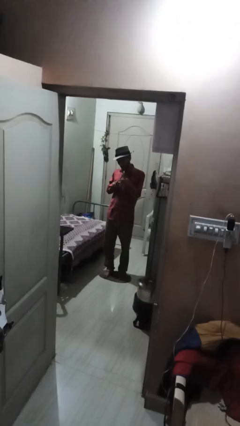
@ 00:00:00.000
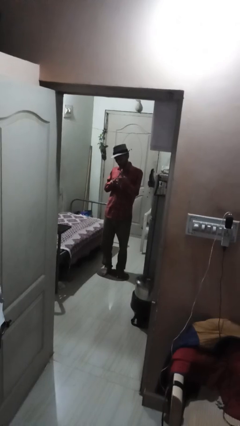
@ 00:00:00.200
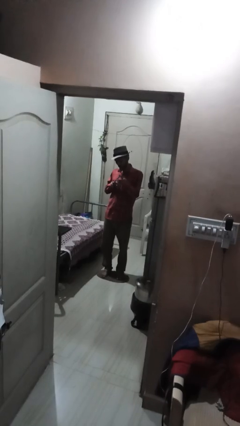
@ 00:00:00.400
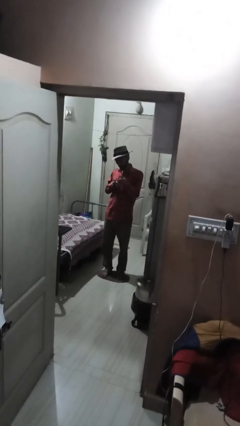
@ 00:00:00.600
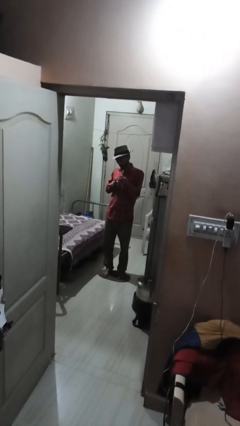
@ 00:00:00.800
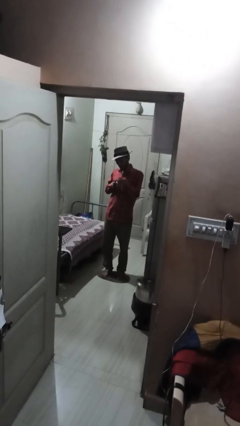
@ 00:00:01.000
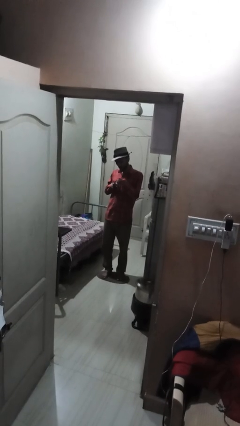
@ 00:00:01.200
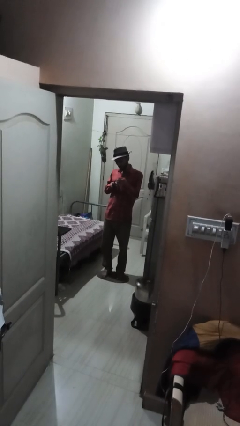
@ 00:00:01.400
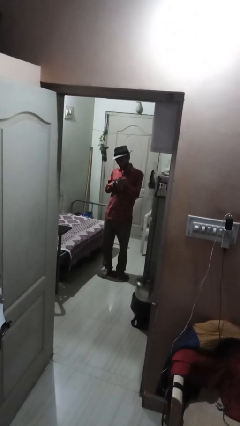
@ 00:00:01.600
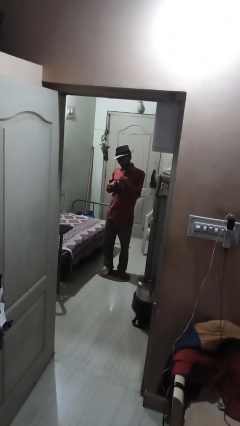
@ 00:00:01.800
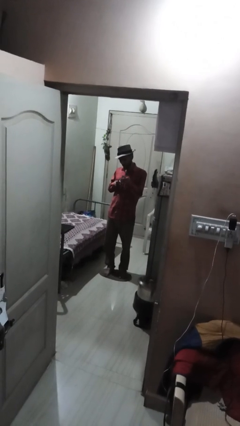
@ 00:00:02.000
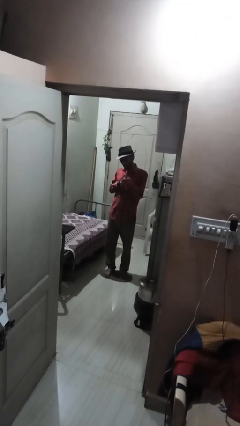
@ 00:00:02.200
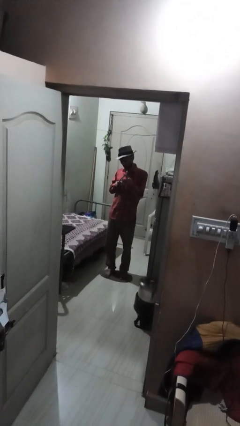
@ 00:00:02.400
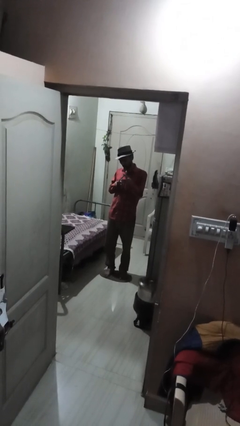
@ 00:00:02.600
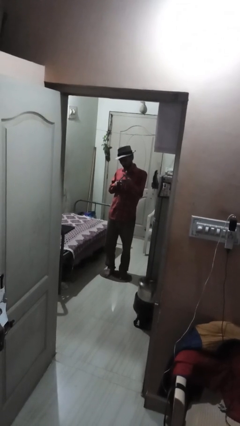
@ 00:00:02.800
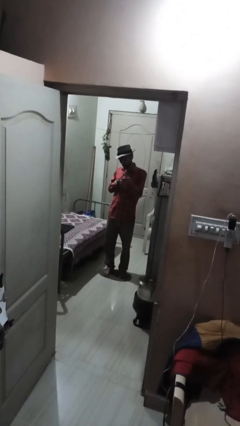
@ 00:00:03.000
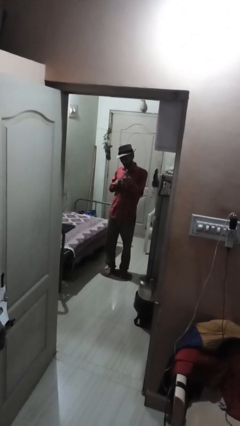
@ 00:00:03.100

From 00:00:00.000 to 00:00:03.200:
person clips fingernails

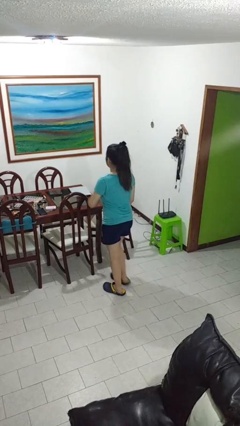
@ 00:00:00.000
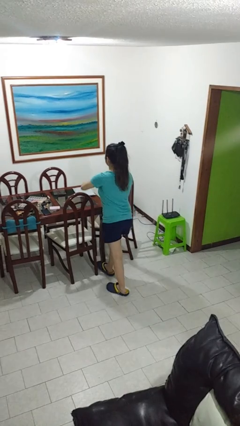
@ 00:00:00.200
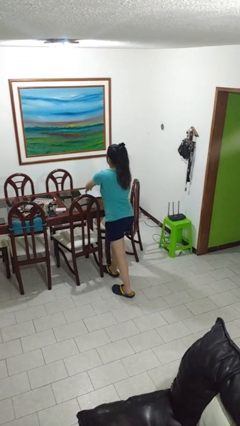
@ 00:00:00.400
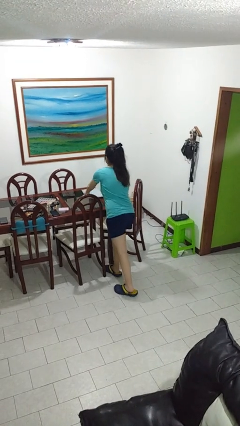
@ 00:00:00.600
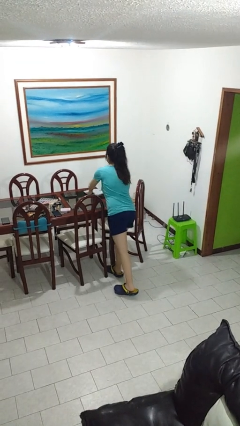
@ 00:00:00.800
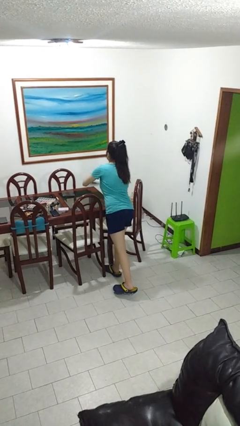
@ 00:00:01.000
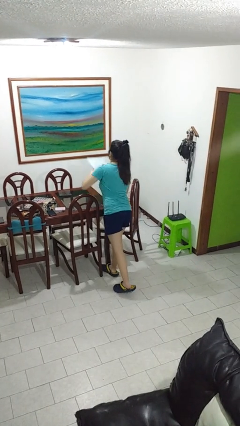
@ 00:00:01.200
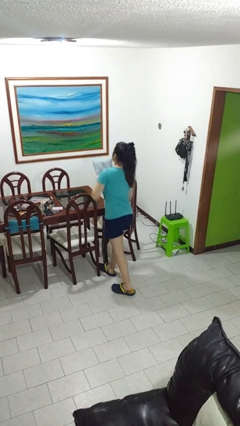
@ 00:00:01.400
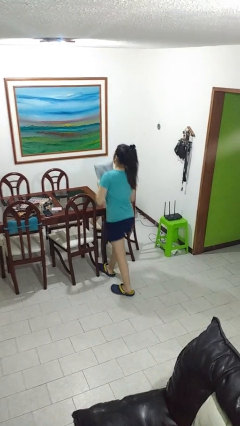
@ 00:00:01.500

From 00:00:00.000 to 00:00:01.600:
person picks up object from table

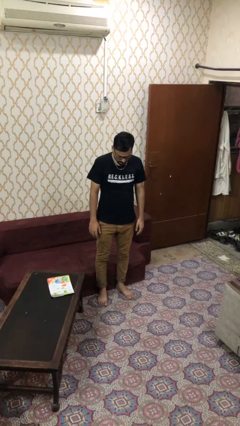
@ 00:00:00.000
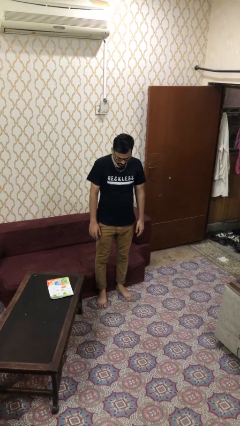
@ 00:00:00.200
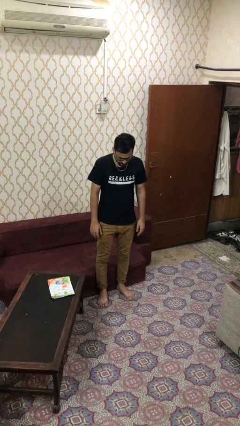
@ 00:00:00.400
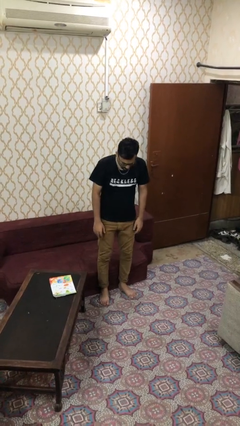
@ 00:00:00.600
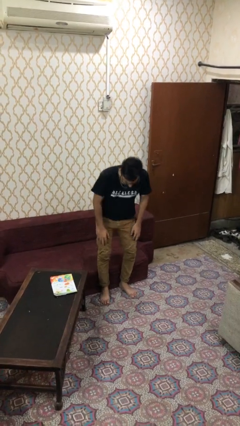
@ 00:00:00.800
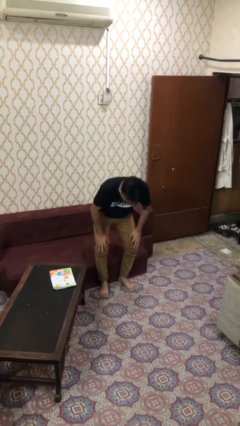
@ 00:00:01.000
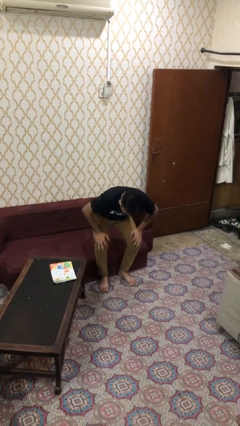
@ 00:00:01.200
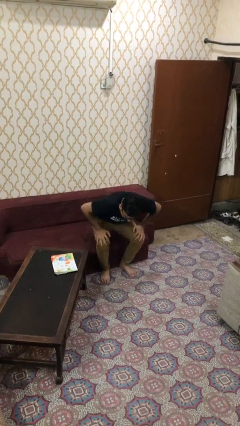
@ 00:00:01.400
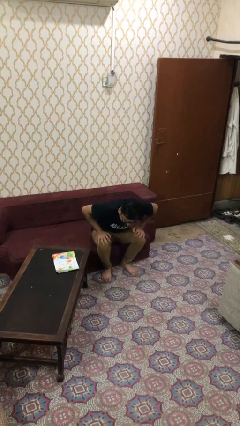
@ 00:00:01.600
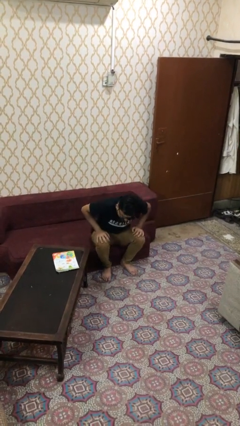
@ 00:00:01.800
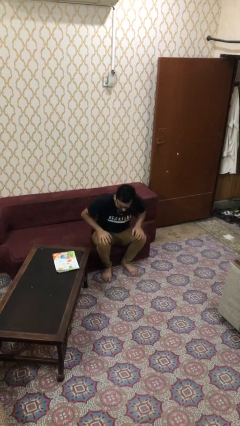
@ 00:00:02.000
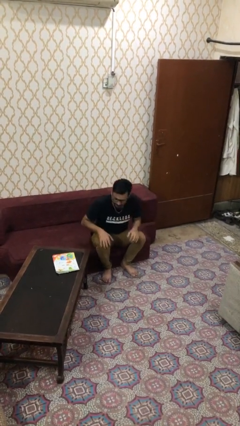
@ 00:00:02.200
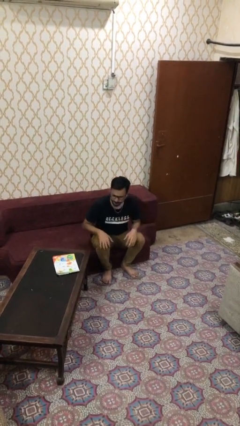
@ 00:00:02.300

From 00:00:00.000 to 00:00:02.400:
person sits down

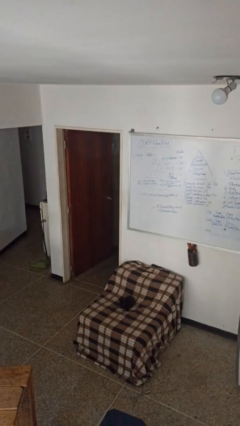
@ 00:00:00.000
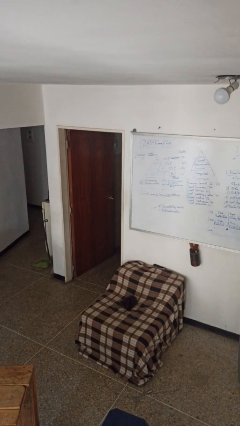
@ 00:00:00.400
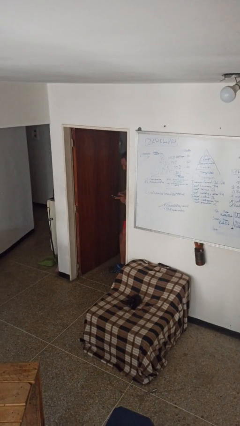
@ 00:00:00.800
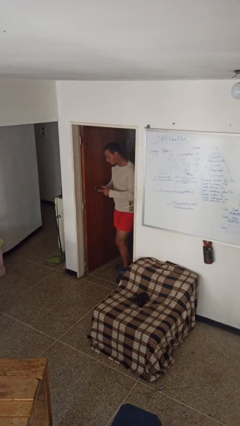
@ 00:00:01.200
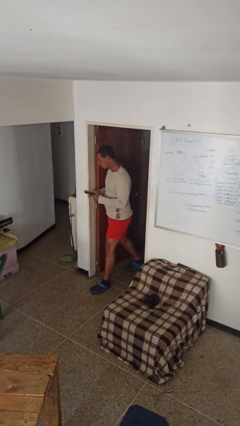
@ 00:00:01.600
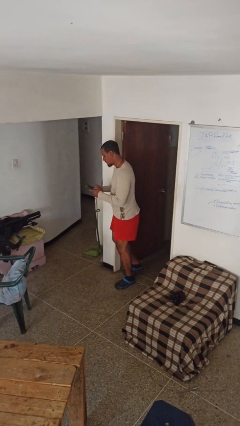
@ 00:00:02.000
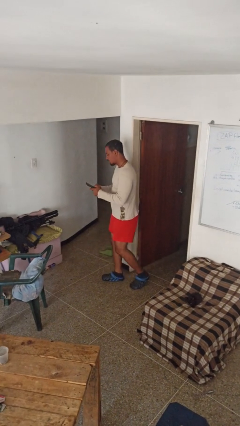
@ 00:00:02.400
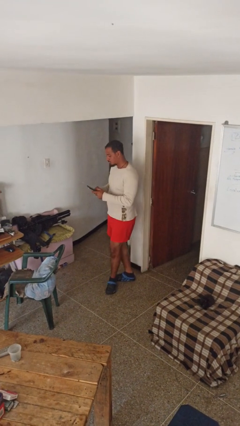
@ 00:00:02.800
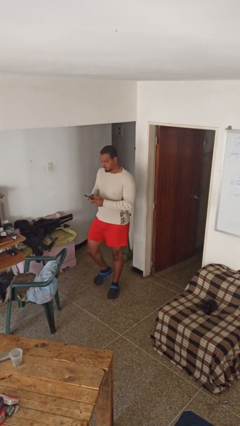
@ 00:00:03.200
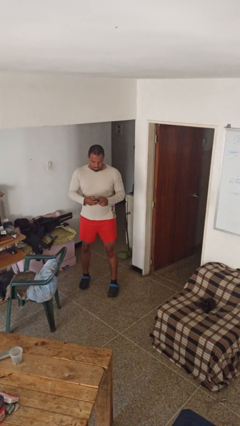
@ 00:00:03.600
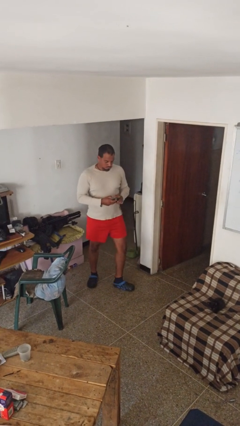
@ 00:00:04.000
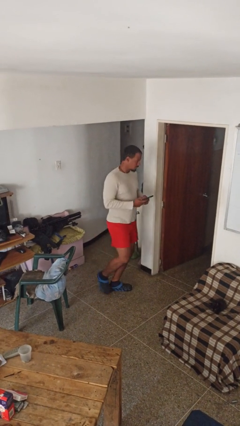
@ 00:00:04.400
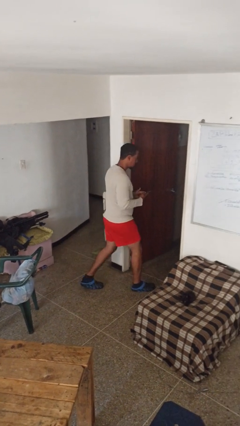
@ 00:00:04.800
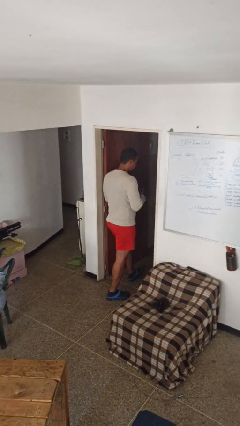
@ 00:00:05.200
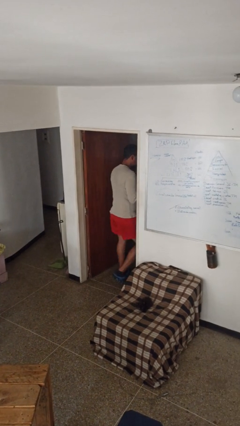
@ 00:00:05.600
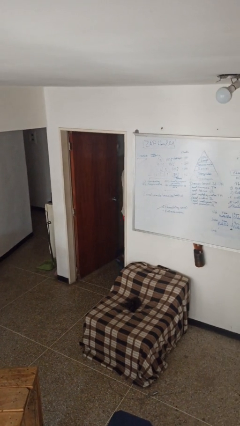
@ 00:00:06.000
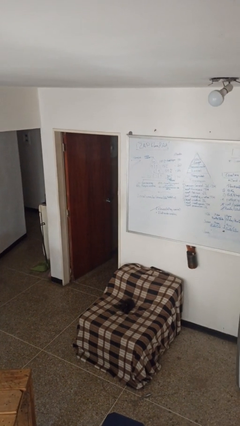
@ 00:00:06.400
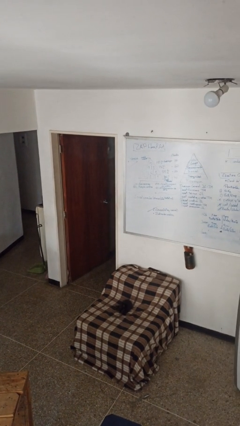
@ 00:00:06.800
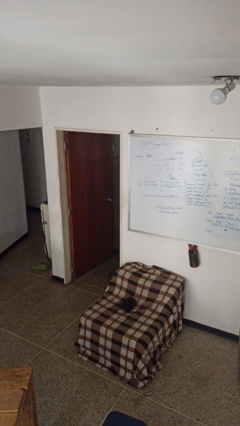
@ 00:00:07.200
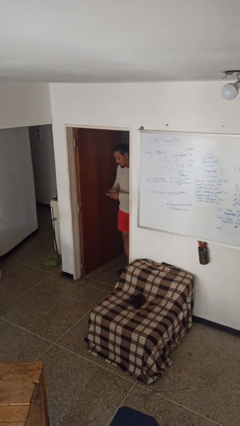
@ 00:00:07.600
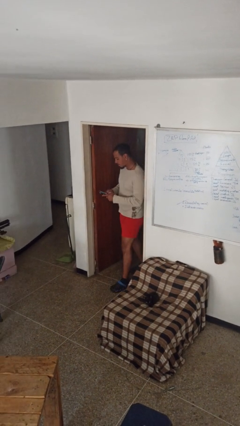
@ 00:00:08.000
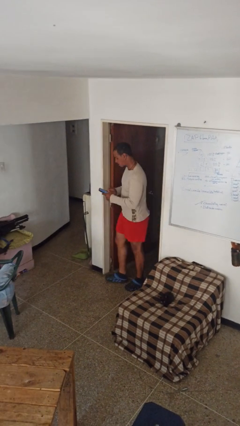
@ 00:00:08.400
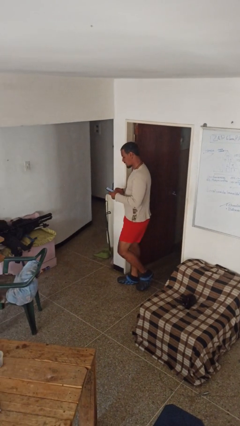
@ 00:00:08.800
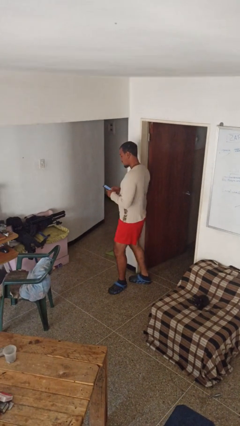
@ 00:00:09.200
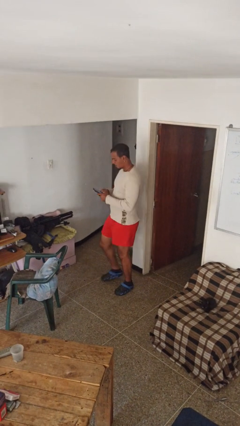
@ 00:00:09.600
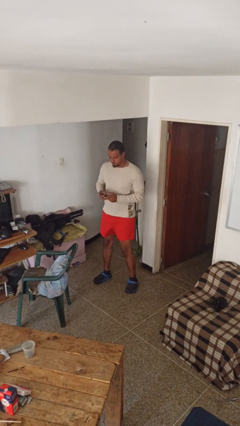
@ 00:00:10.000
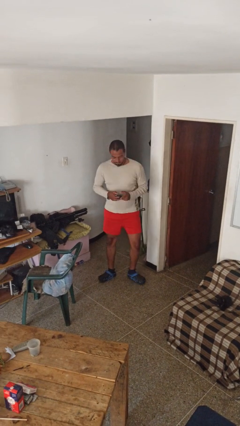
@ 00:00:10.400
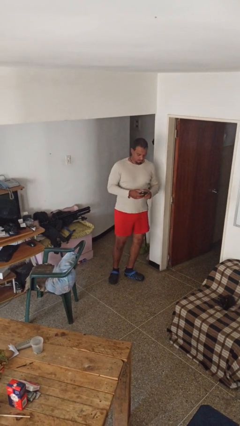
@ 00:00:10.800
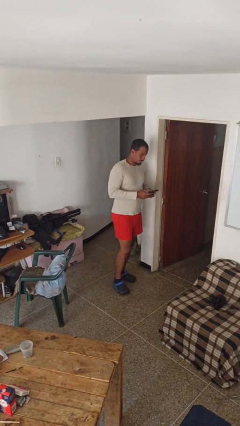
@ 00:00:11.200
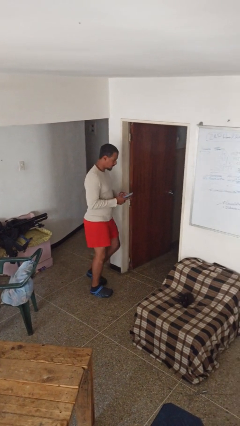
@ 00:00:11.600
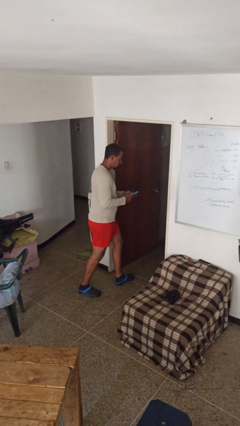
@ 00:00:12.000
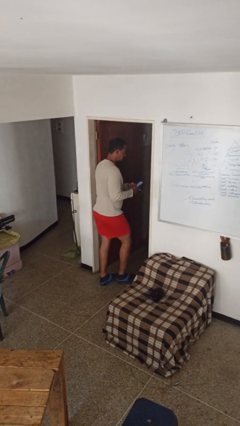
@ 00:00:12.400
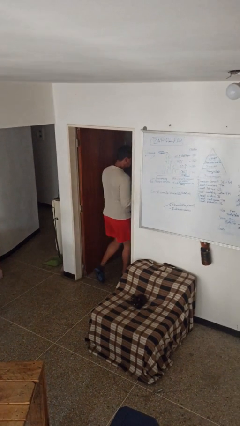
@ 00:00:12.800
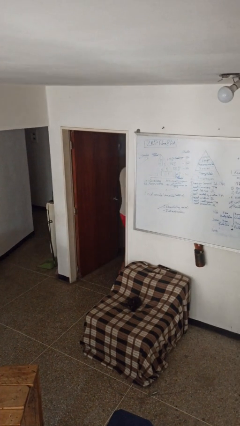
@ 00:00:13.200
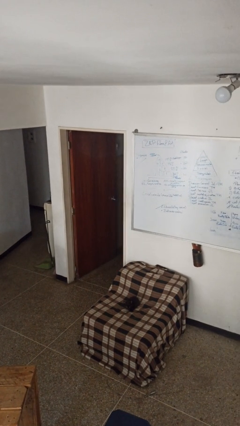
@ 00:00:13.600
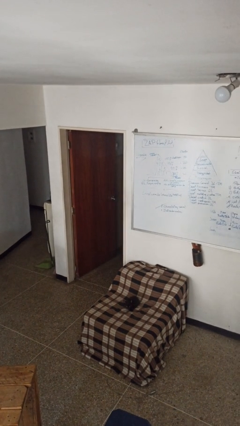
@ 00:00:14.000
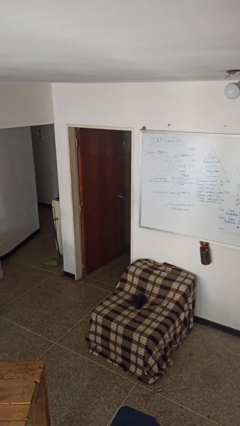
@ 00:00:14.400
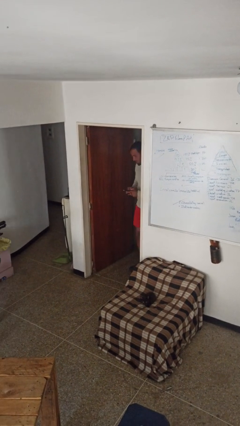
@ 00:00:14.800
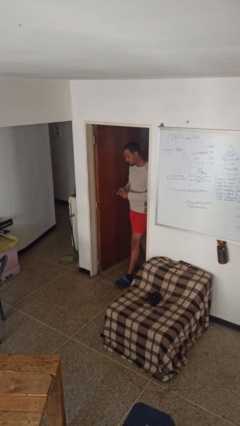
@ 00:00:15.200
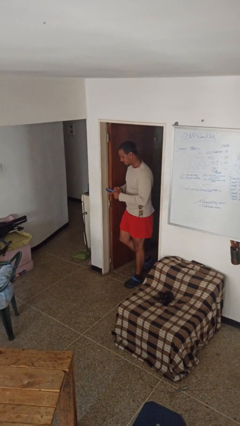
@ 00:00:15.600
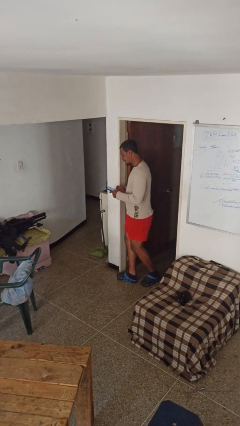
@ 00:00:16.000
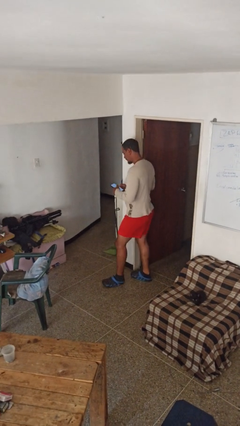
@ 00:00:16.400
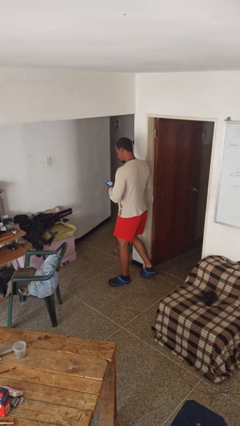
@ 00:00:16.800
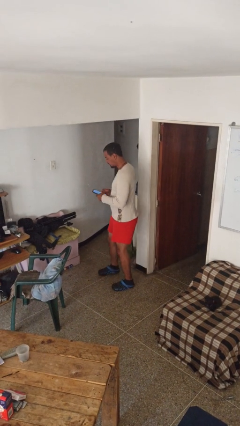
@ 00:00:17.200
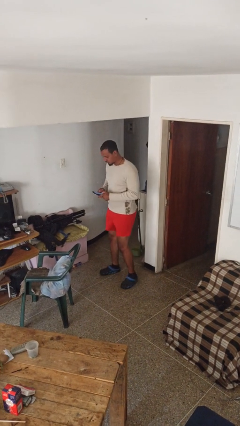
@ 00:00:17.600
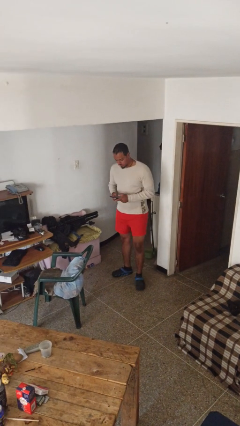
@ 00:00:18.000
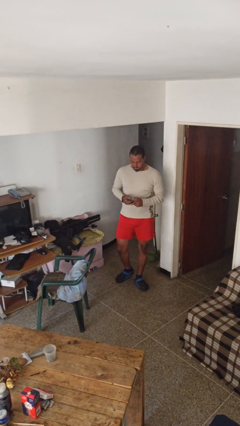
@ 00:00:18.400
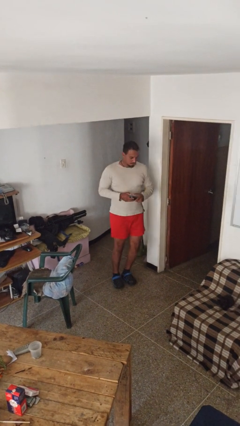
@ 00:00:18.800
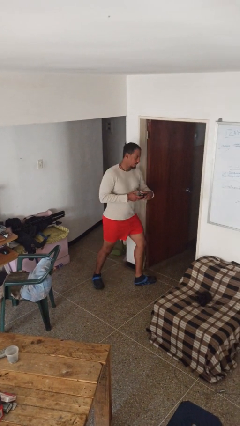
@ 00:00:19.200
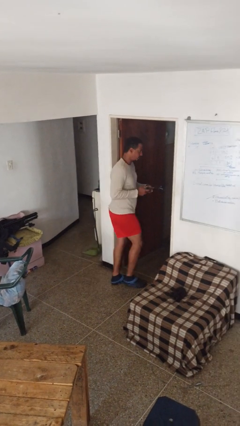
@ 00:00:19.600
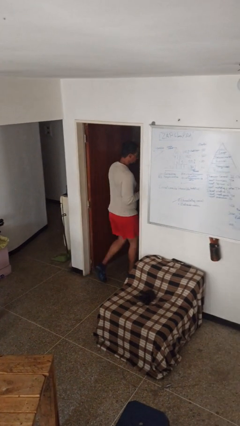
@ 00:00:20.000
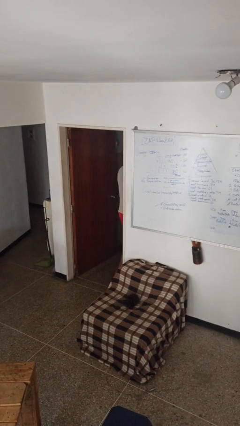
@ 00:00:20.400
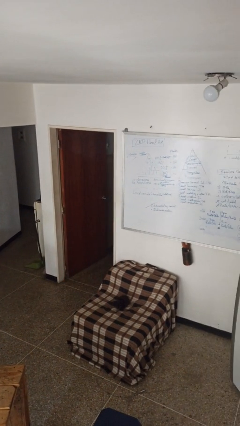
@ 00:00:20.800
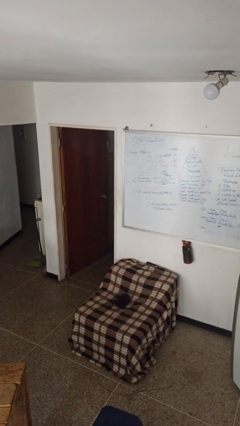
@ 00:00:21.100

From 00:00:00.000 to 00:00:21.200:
person texts on phone
